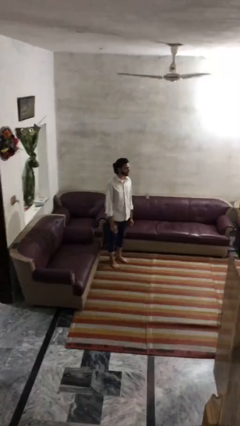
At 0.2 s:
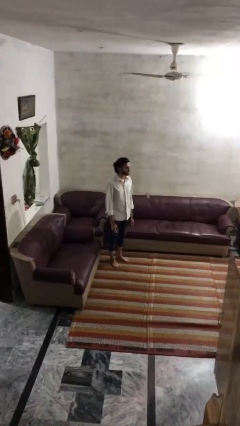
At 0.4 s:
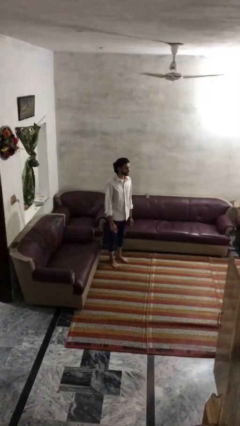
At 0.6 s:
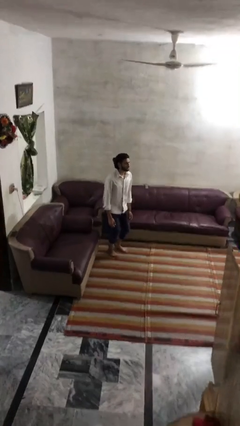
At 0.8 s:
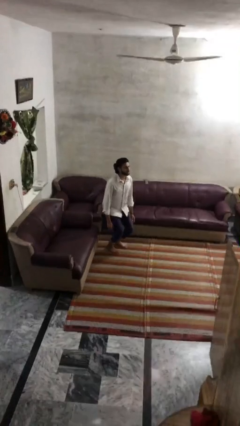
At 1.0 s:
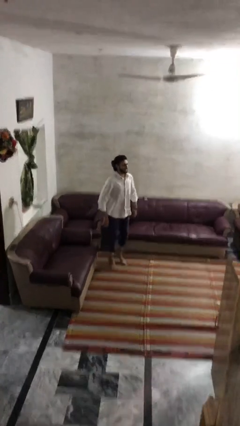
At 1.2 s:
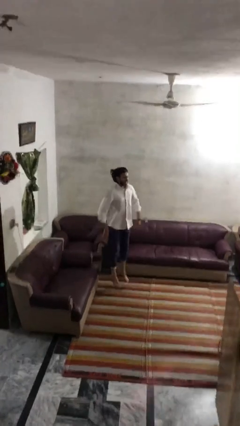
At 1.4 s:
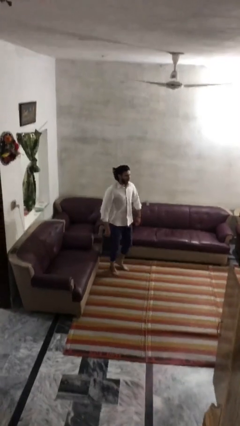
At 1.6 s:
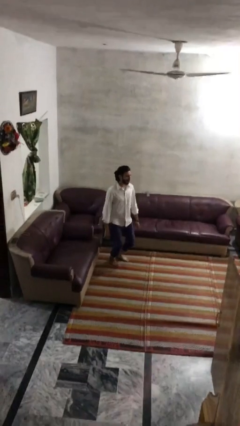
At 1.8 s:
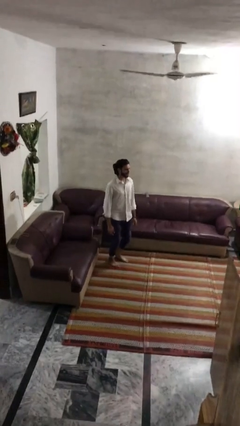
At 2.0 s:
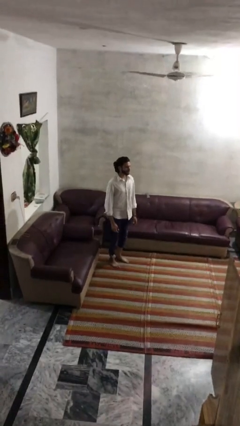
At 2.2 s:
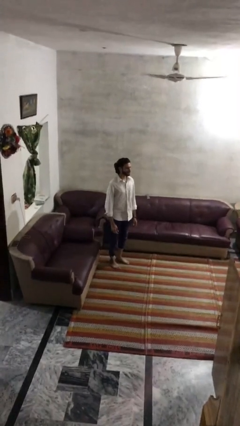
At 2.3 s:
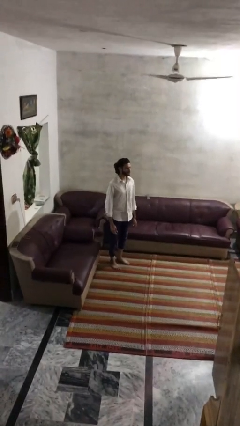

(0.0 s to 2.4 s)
person jumps

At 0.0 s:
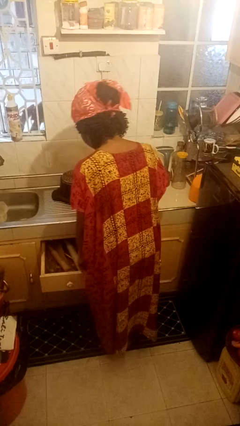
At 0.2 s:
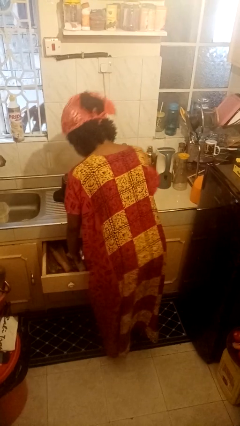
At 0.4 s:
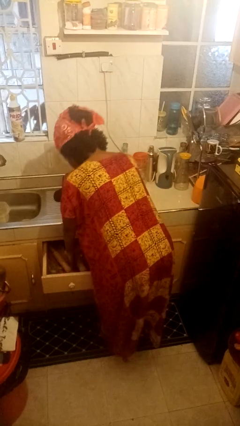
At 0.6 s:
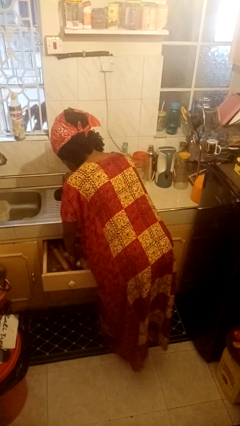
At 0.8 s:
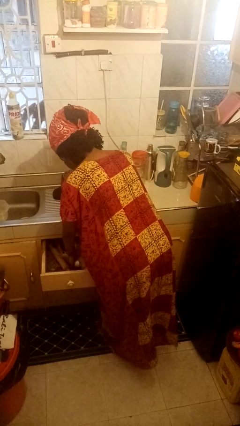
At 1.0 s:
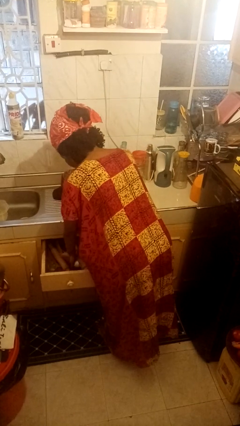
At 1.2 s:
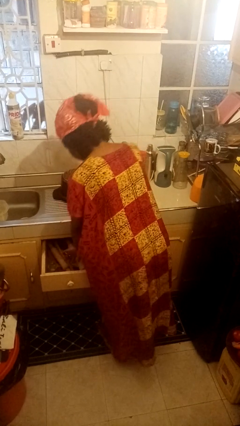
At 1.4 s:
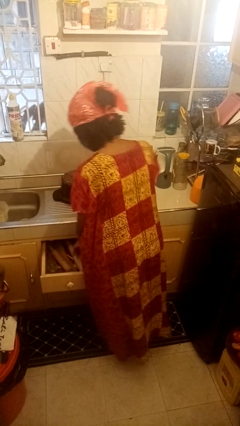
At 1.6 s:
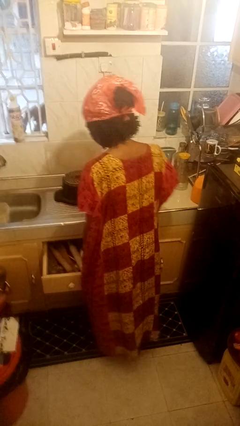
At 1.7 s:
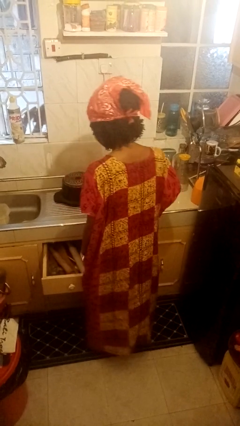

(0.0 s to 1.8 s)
person searches in kitchen drawer

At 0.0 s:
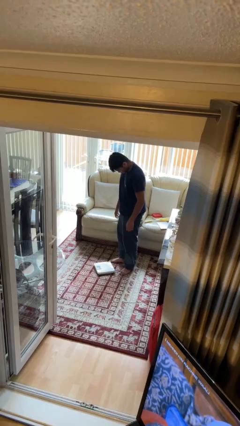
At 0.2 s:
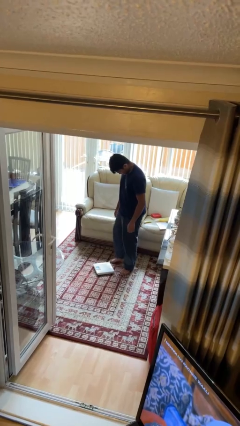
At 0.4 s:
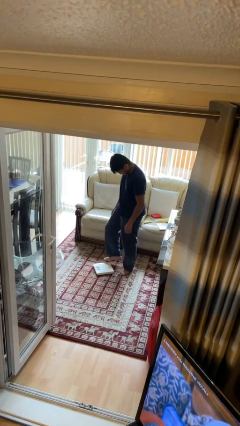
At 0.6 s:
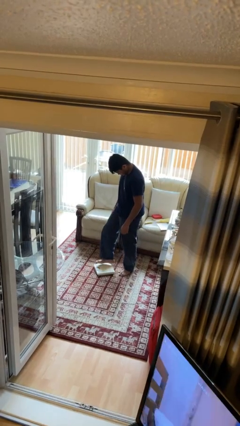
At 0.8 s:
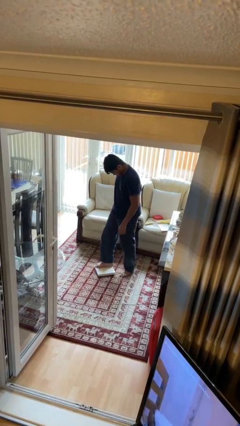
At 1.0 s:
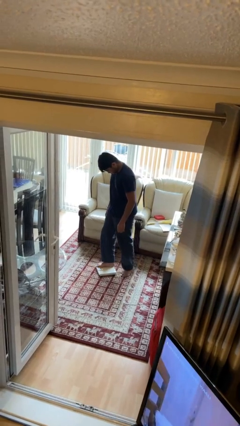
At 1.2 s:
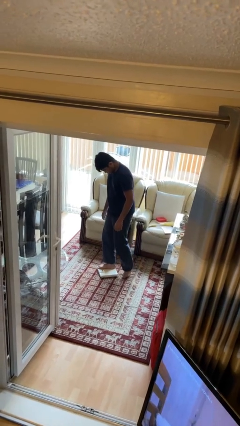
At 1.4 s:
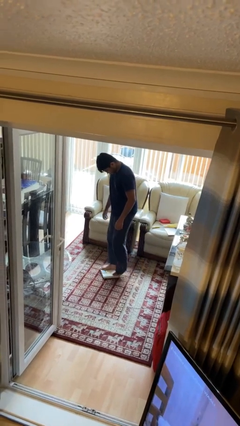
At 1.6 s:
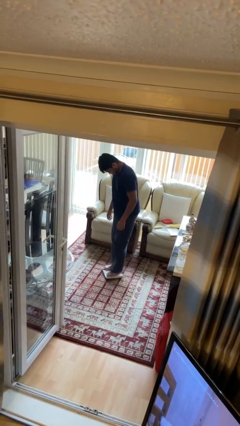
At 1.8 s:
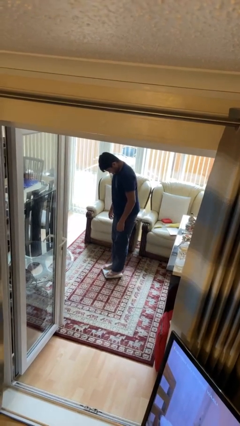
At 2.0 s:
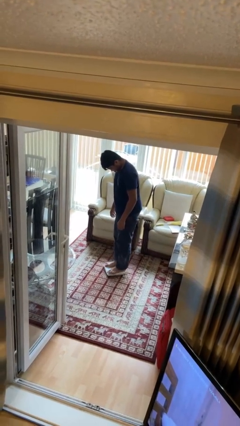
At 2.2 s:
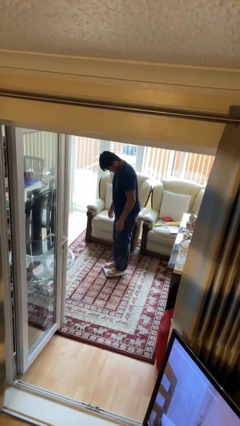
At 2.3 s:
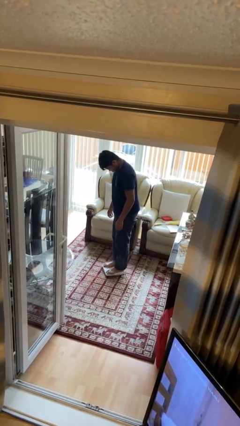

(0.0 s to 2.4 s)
person uses bodyweight scale

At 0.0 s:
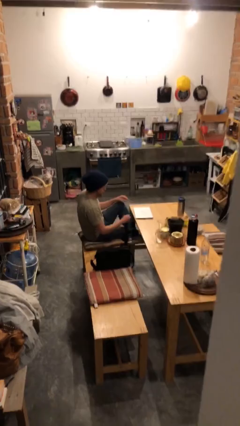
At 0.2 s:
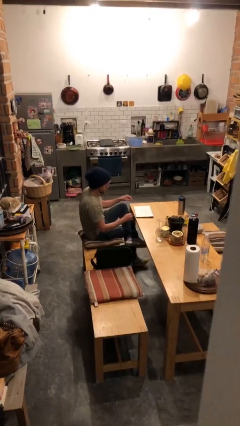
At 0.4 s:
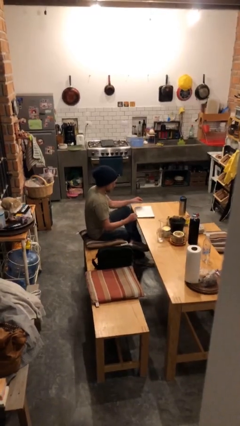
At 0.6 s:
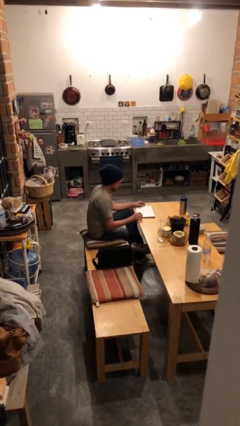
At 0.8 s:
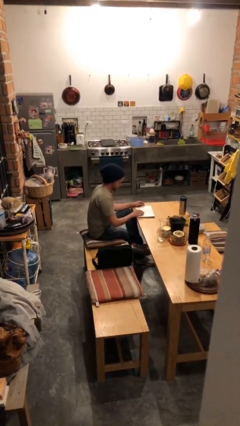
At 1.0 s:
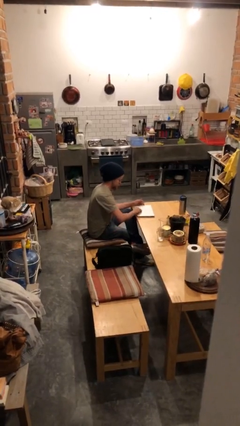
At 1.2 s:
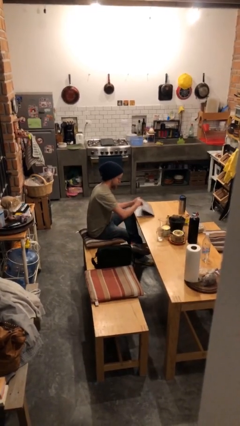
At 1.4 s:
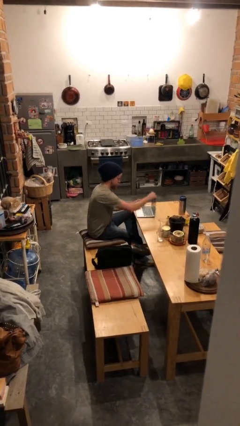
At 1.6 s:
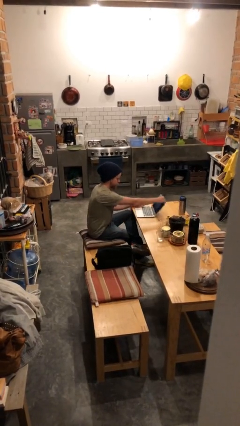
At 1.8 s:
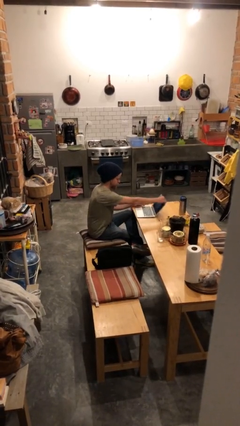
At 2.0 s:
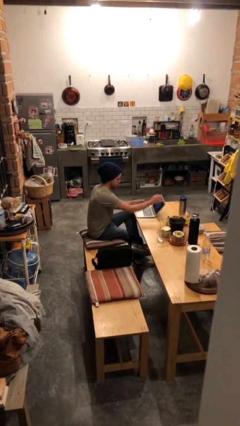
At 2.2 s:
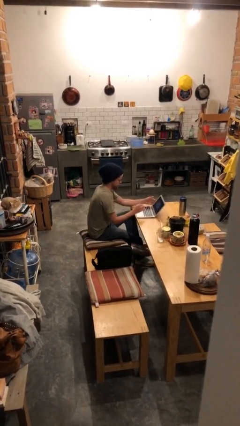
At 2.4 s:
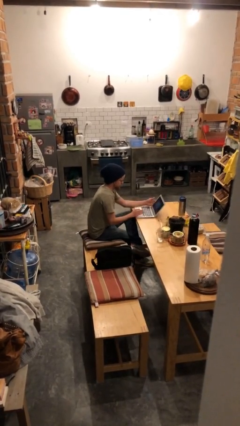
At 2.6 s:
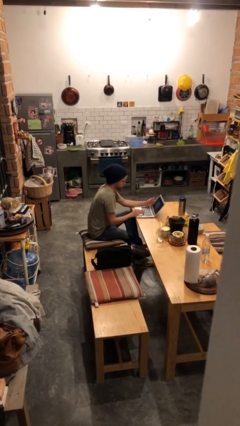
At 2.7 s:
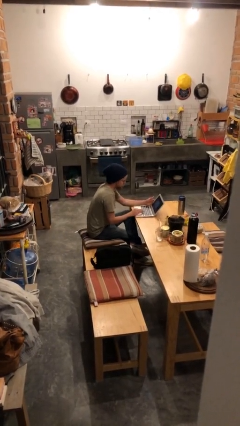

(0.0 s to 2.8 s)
person interacts with laptop

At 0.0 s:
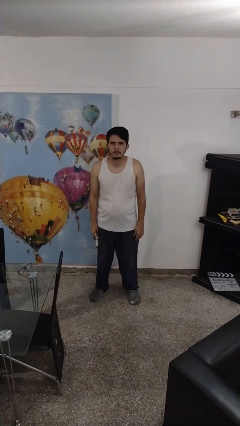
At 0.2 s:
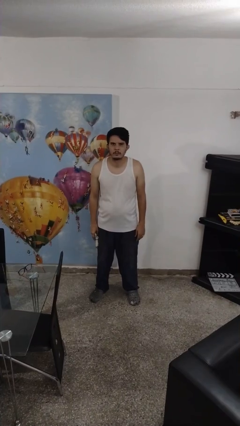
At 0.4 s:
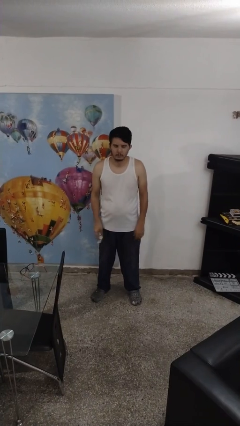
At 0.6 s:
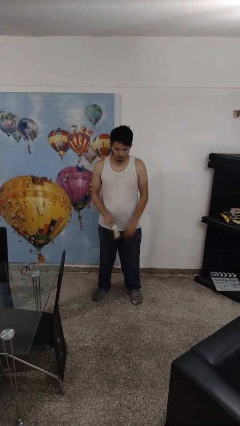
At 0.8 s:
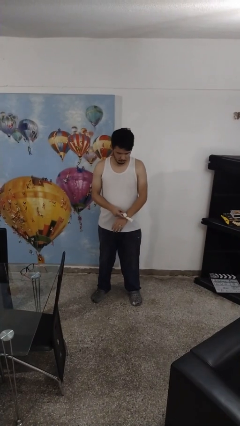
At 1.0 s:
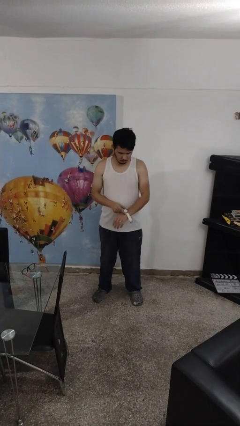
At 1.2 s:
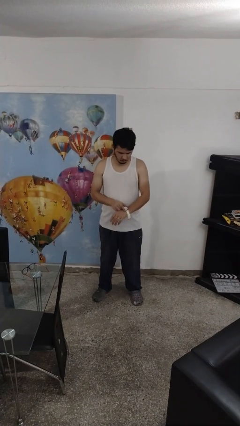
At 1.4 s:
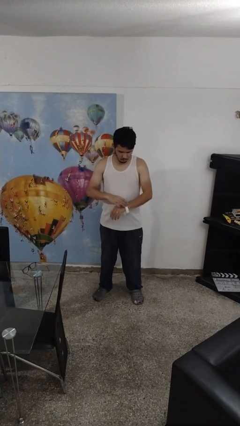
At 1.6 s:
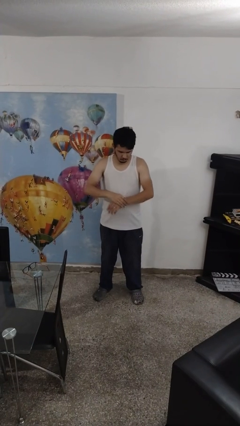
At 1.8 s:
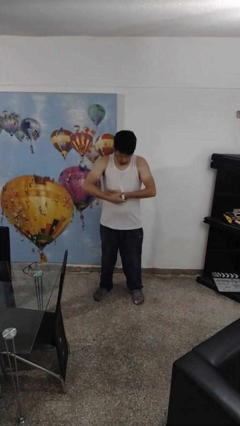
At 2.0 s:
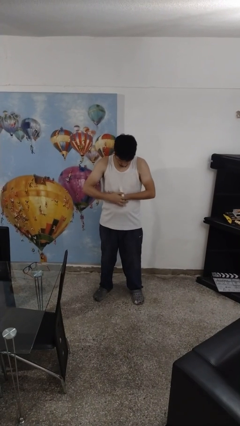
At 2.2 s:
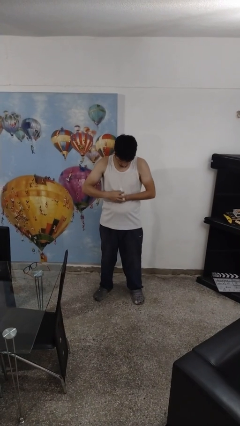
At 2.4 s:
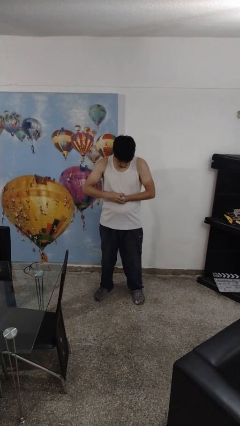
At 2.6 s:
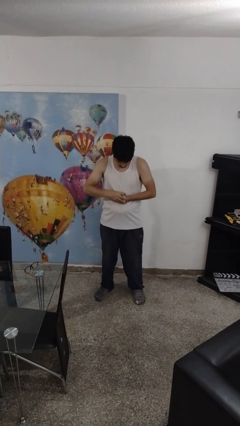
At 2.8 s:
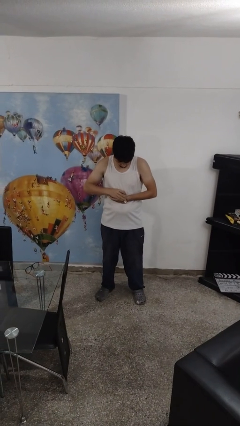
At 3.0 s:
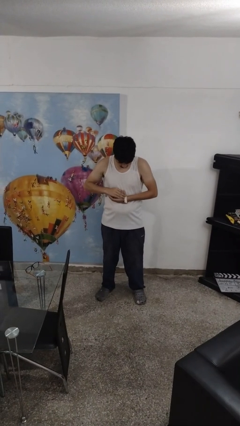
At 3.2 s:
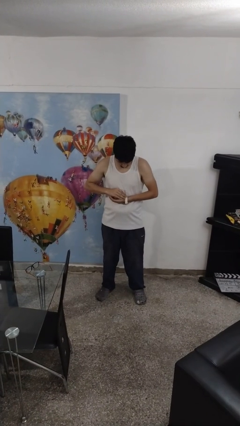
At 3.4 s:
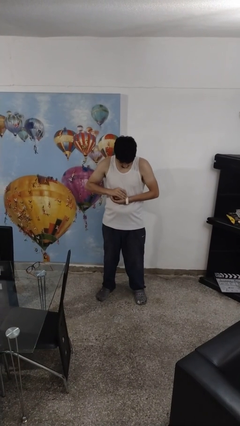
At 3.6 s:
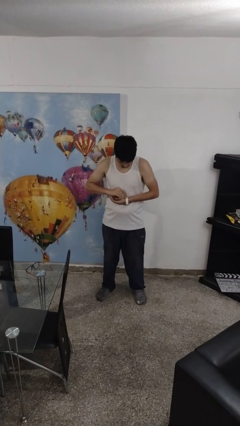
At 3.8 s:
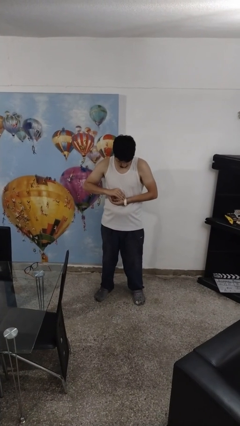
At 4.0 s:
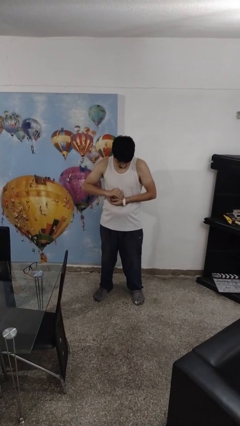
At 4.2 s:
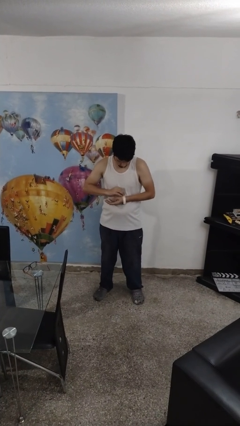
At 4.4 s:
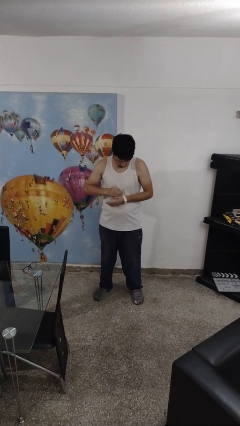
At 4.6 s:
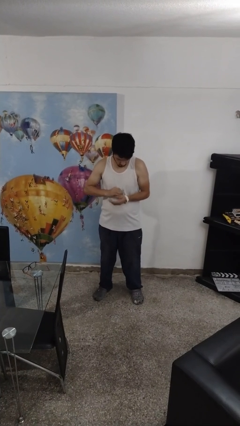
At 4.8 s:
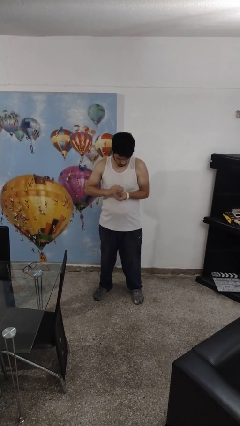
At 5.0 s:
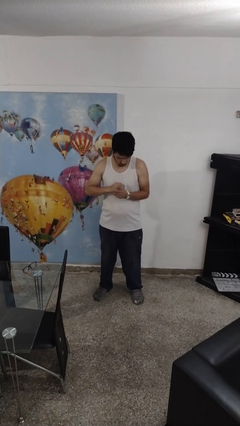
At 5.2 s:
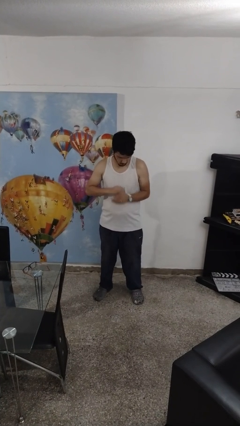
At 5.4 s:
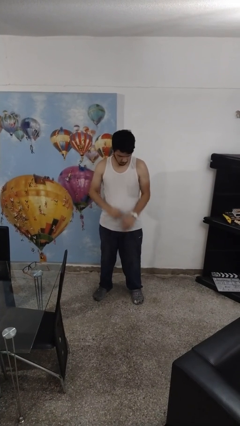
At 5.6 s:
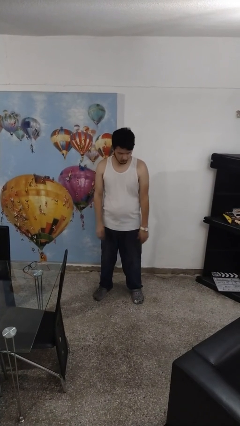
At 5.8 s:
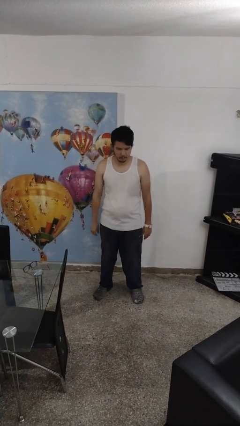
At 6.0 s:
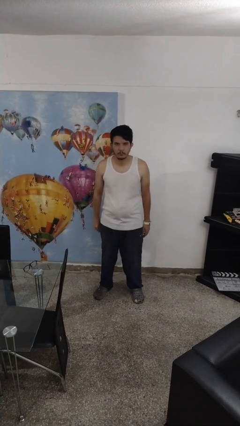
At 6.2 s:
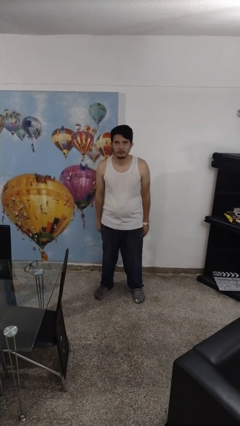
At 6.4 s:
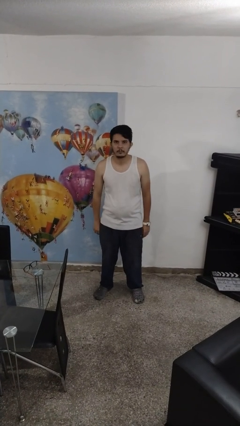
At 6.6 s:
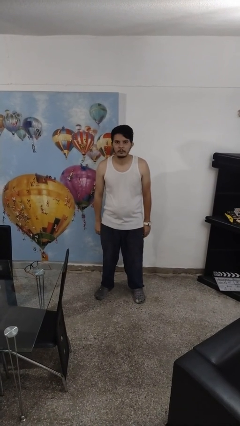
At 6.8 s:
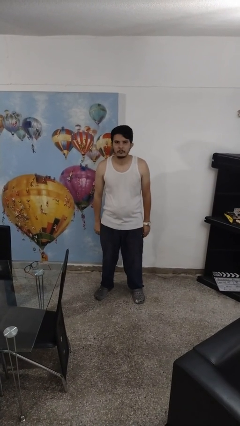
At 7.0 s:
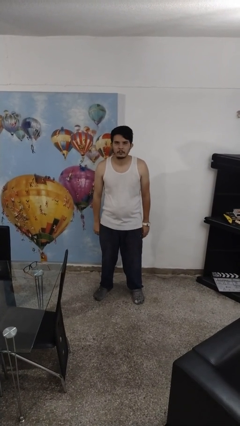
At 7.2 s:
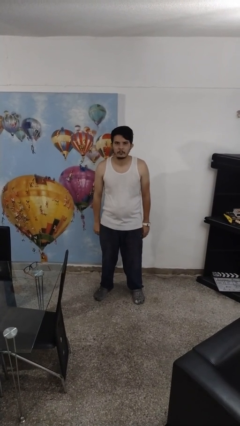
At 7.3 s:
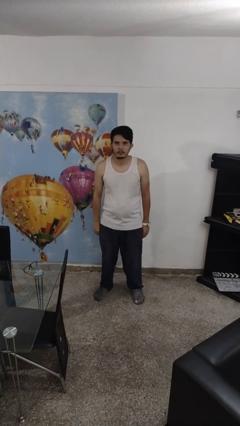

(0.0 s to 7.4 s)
person puts on wristwatch

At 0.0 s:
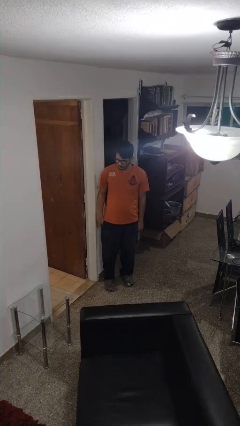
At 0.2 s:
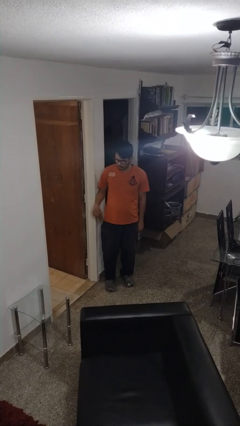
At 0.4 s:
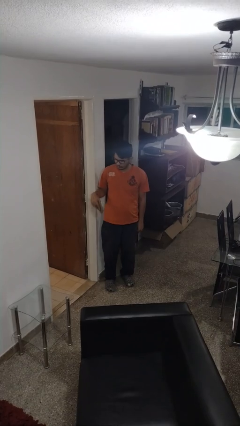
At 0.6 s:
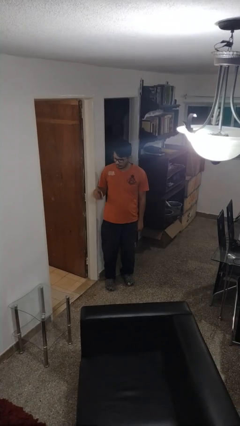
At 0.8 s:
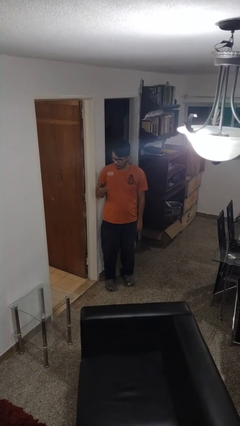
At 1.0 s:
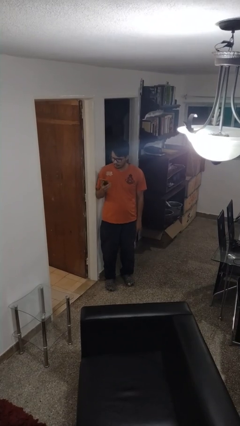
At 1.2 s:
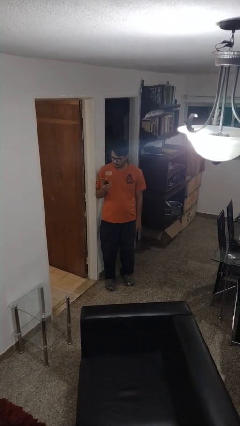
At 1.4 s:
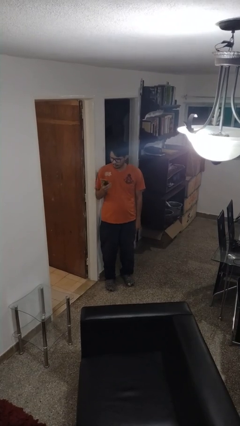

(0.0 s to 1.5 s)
person takes phone from pocket
